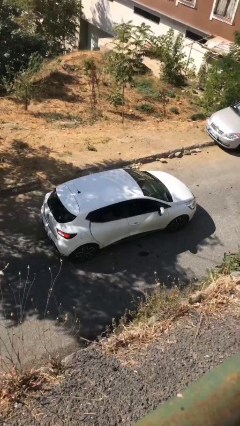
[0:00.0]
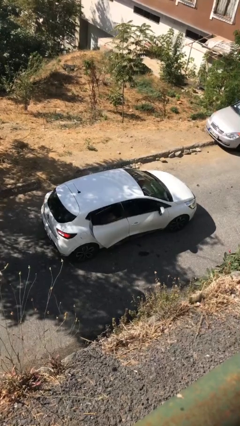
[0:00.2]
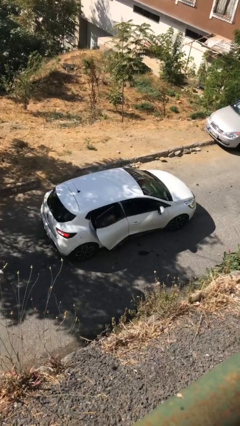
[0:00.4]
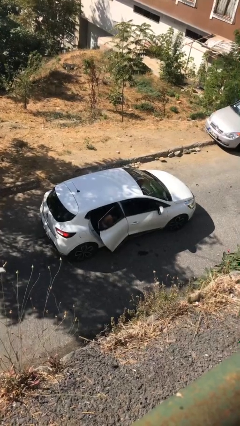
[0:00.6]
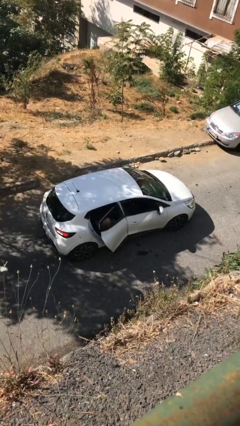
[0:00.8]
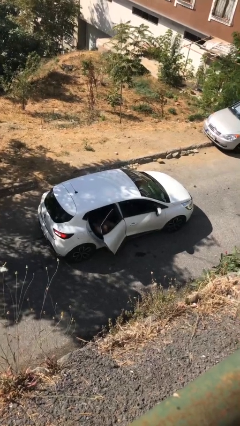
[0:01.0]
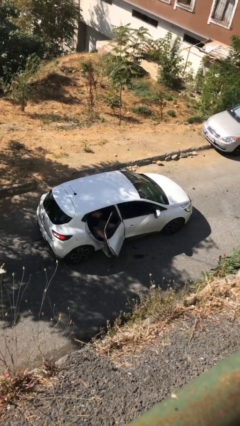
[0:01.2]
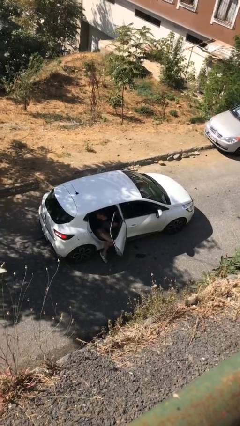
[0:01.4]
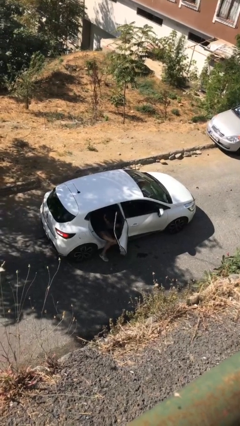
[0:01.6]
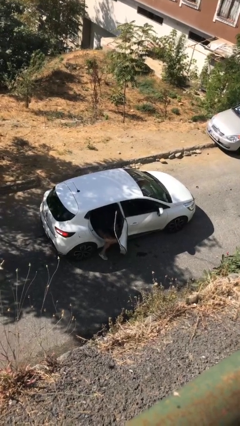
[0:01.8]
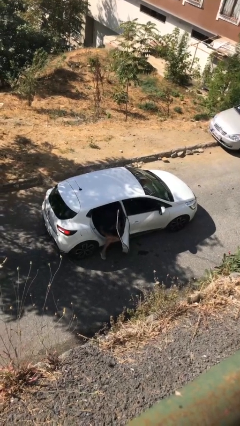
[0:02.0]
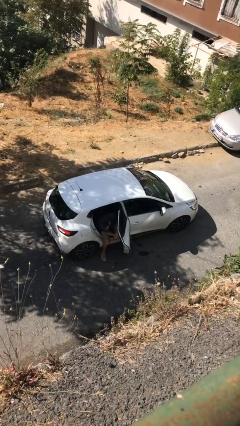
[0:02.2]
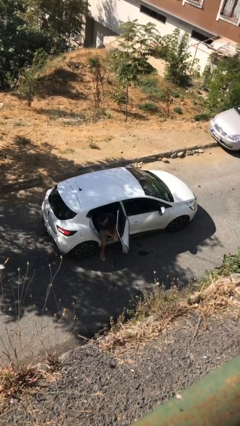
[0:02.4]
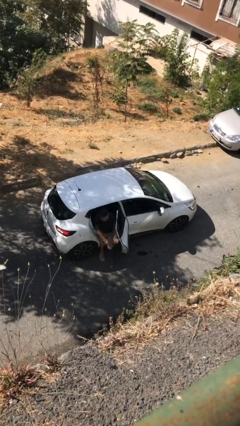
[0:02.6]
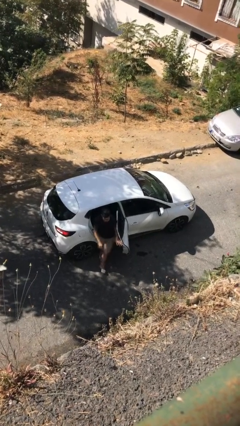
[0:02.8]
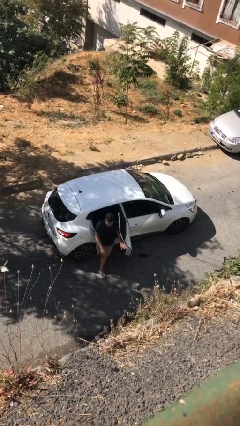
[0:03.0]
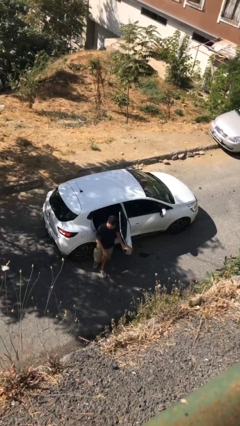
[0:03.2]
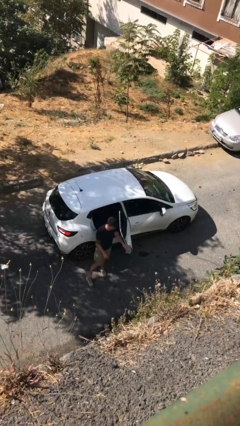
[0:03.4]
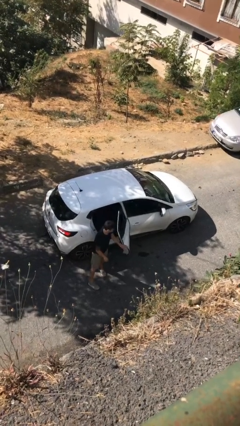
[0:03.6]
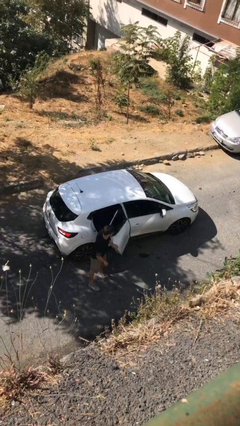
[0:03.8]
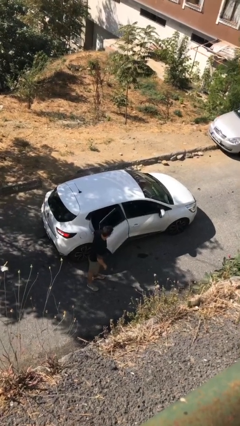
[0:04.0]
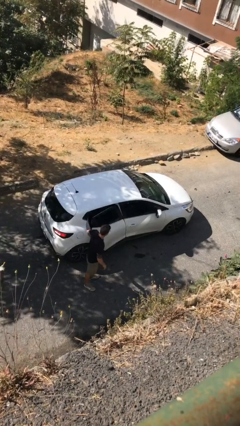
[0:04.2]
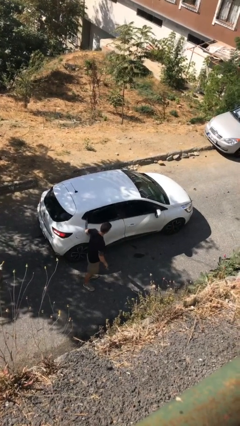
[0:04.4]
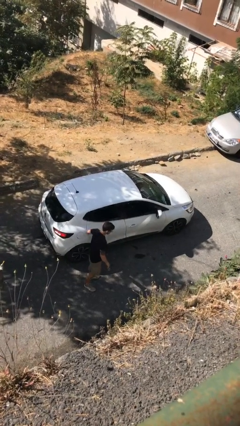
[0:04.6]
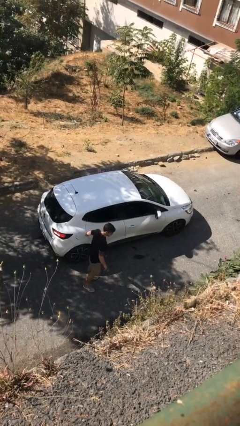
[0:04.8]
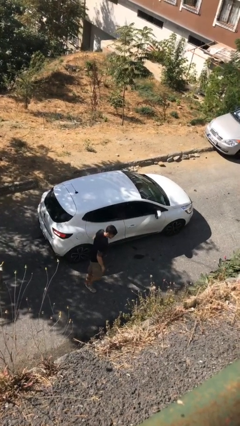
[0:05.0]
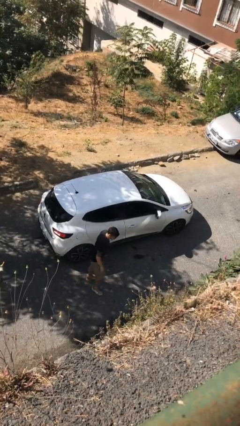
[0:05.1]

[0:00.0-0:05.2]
car drops off person

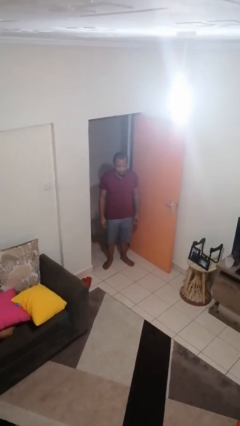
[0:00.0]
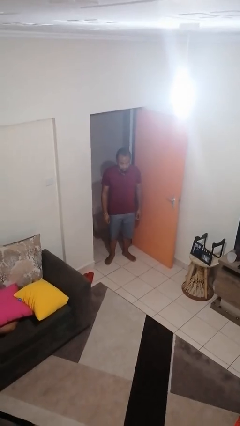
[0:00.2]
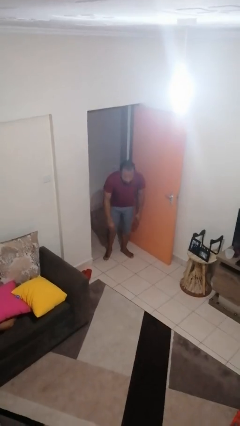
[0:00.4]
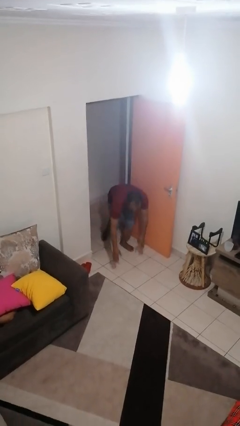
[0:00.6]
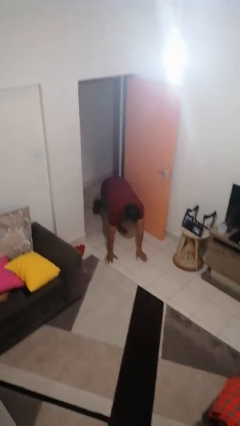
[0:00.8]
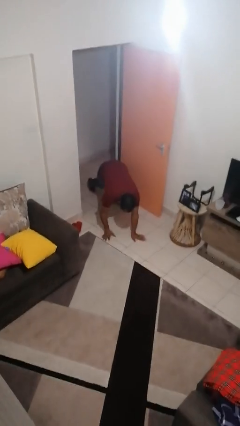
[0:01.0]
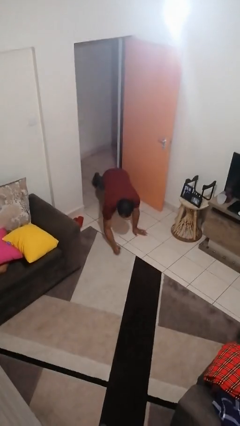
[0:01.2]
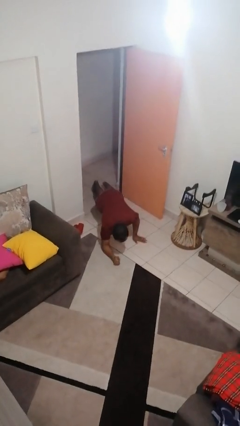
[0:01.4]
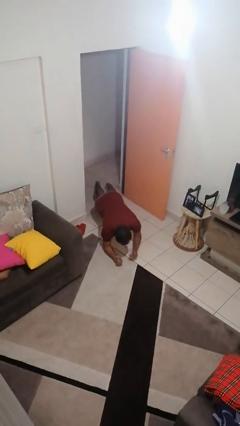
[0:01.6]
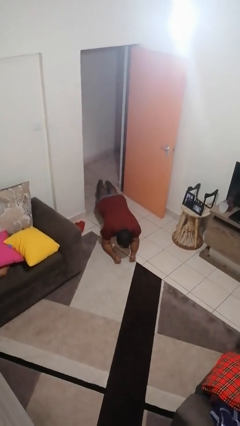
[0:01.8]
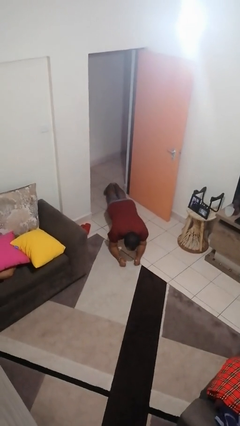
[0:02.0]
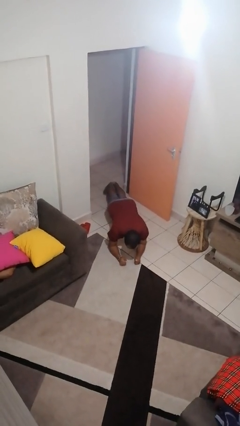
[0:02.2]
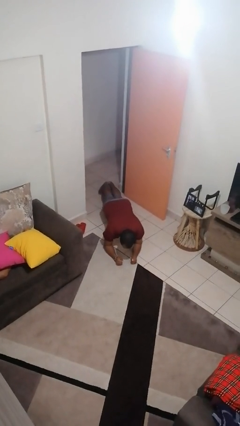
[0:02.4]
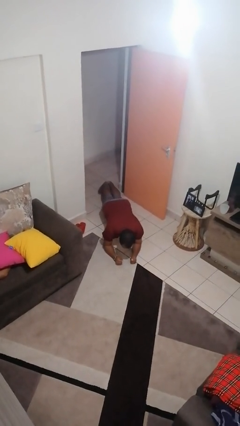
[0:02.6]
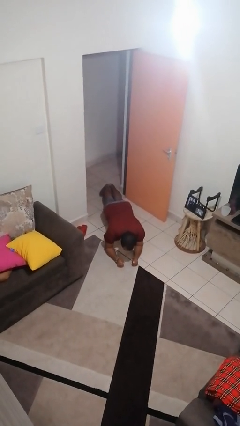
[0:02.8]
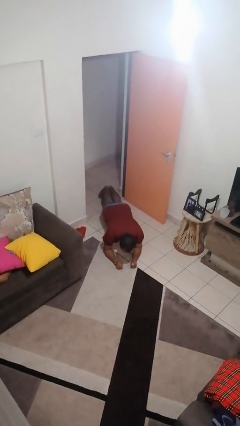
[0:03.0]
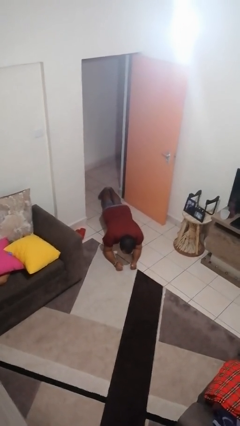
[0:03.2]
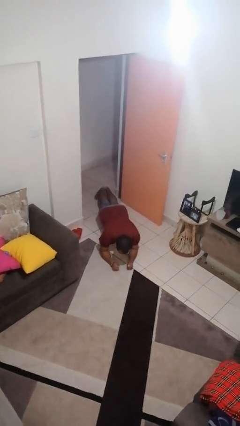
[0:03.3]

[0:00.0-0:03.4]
person exercises with plank

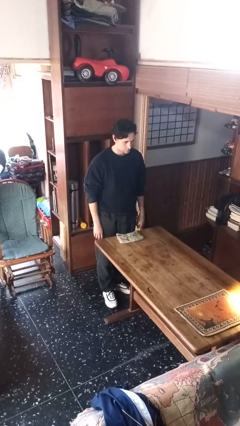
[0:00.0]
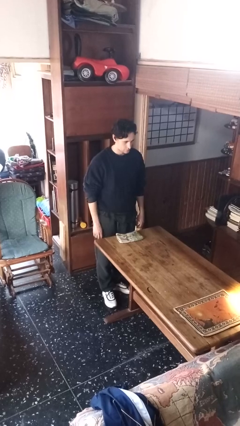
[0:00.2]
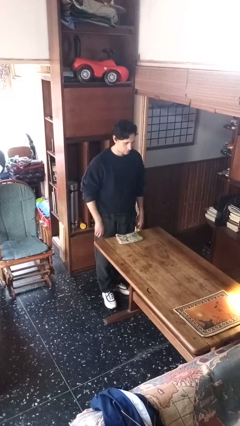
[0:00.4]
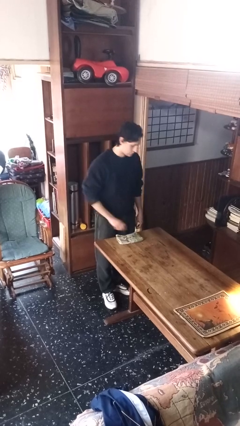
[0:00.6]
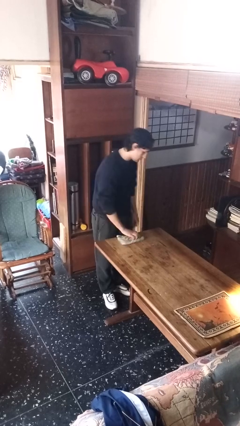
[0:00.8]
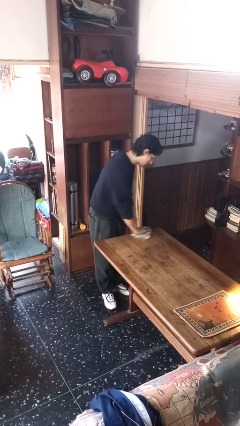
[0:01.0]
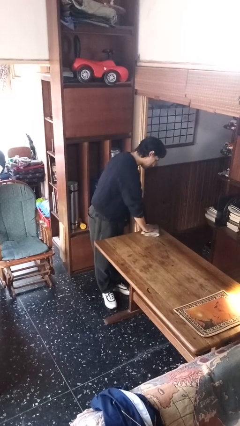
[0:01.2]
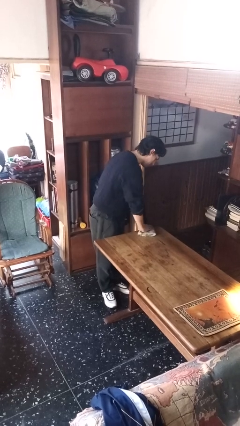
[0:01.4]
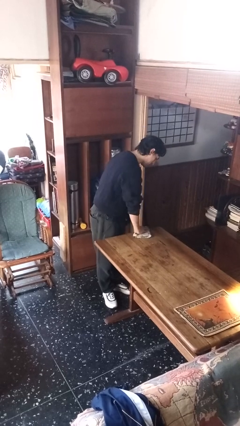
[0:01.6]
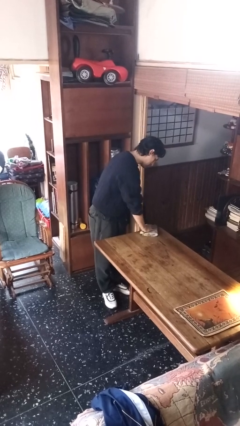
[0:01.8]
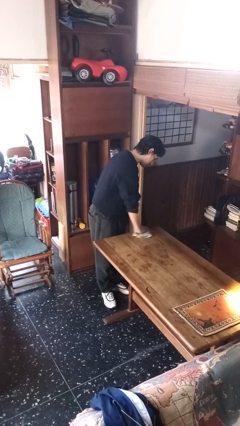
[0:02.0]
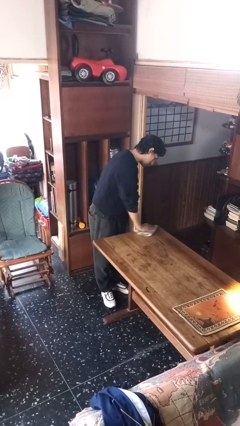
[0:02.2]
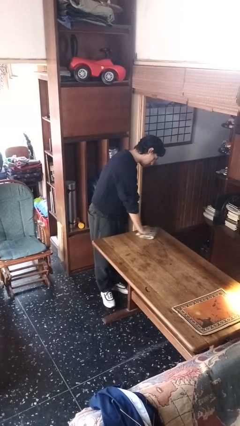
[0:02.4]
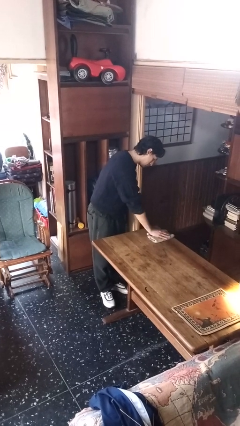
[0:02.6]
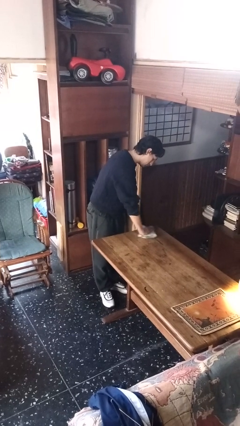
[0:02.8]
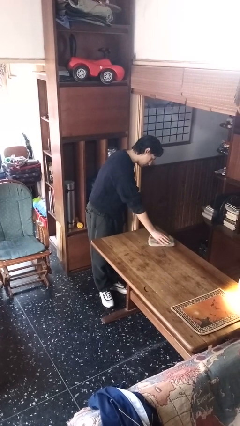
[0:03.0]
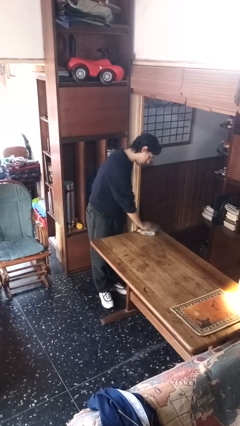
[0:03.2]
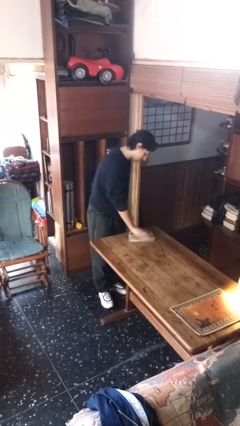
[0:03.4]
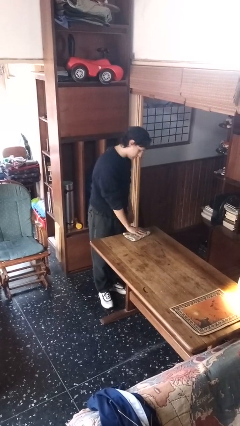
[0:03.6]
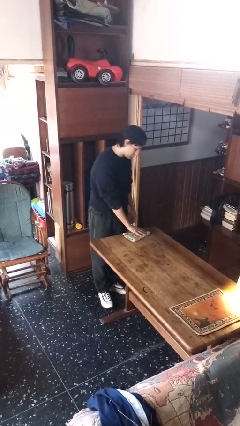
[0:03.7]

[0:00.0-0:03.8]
person cleans table with rag

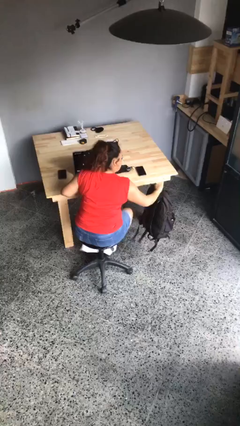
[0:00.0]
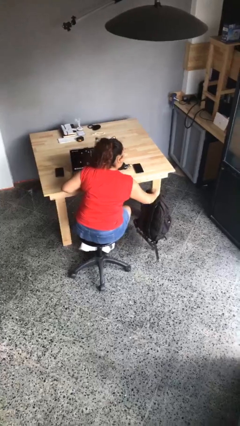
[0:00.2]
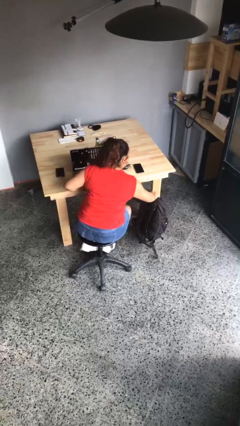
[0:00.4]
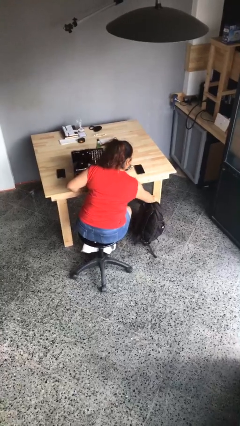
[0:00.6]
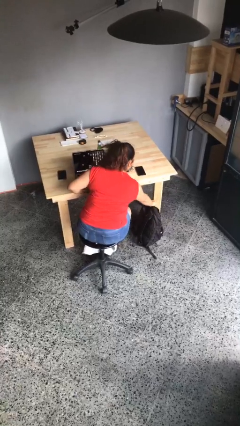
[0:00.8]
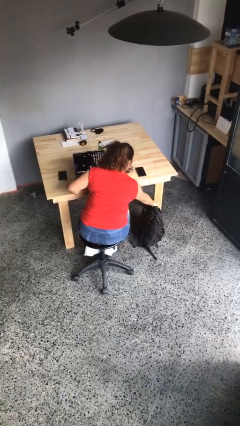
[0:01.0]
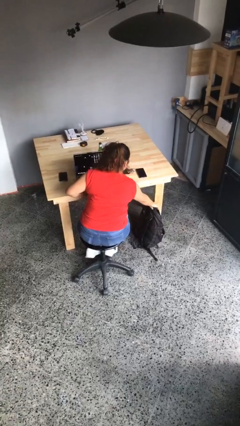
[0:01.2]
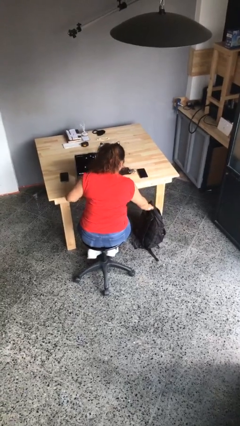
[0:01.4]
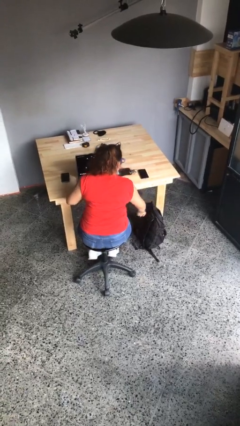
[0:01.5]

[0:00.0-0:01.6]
person puts down object on floor

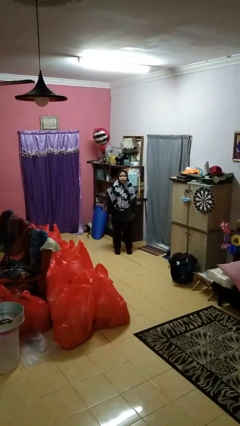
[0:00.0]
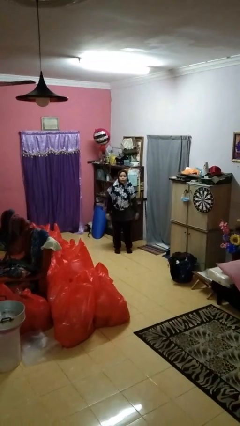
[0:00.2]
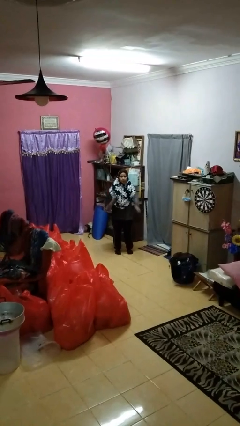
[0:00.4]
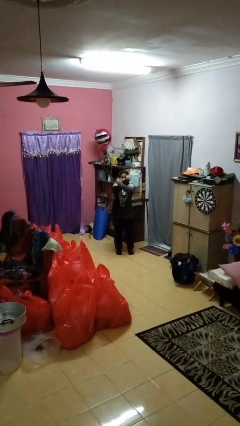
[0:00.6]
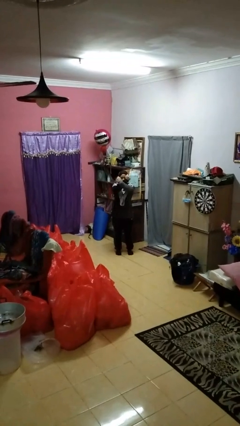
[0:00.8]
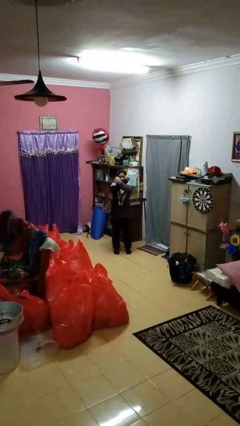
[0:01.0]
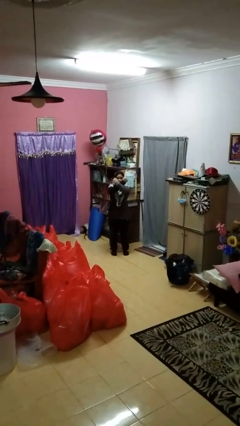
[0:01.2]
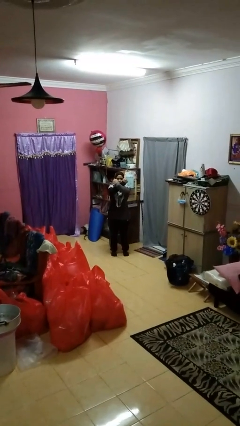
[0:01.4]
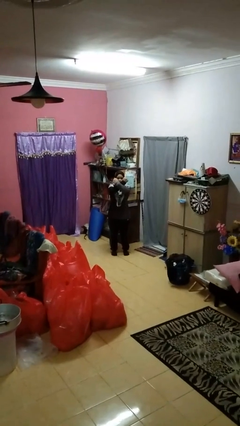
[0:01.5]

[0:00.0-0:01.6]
person crosses arms

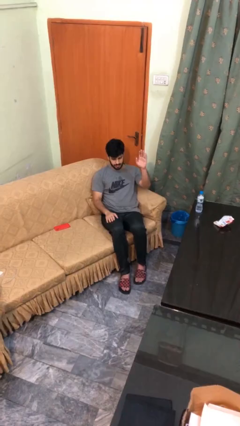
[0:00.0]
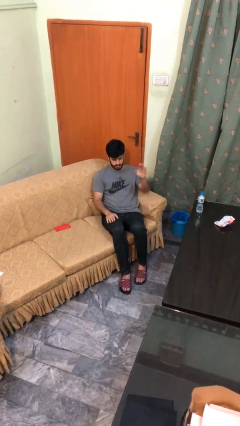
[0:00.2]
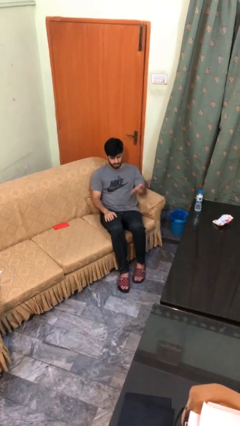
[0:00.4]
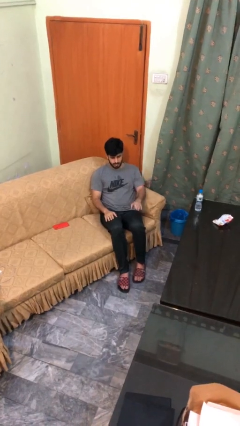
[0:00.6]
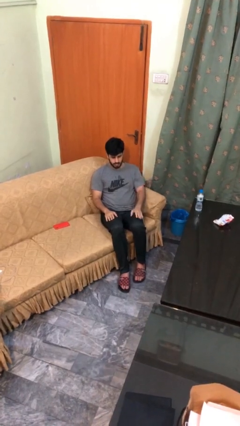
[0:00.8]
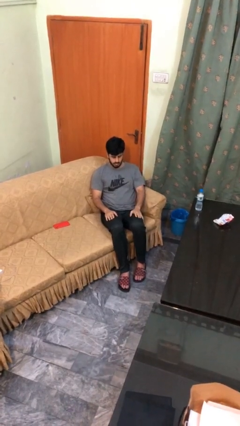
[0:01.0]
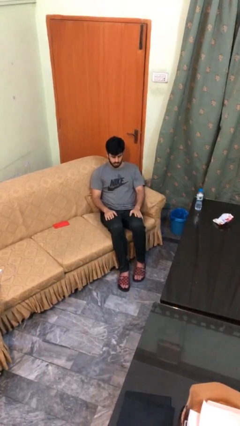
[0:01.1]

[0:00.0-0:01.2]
person gestures lower hand

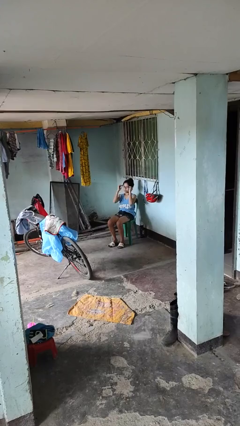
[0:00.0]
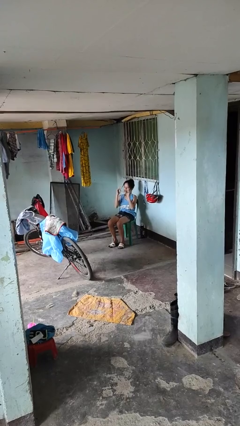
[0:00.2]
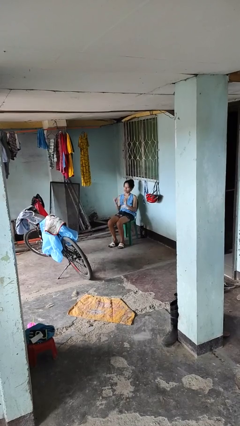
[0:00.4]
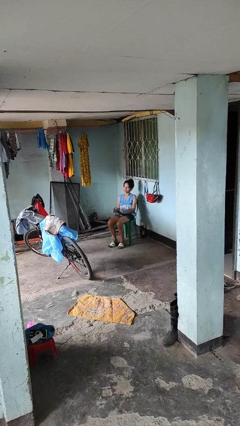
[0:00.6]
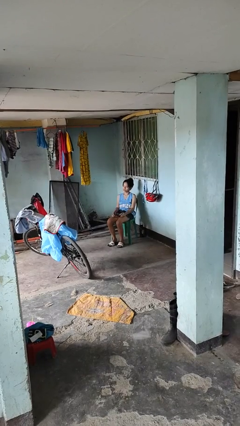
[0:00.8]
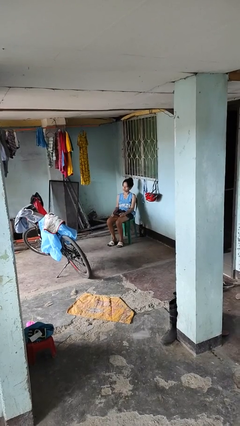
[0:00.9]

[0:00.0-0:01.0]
person takes off glasses
